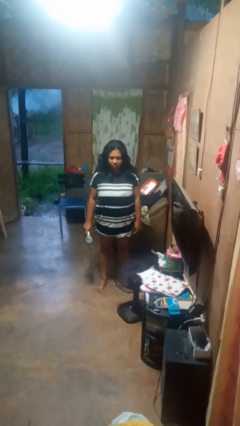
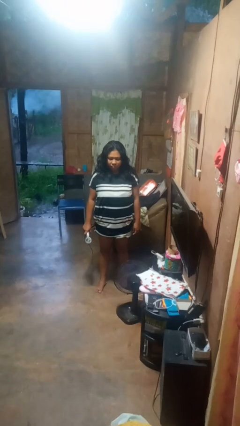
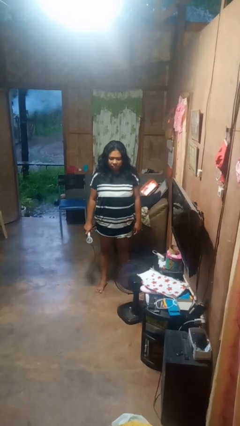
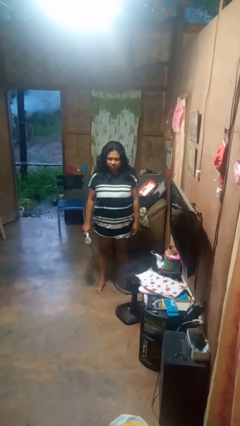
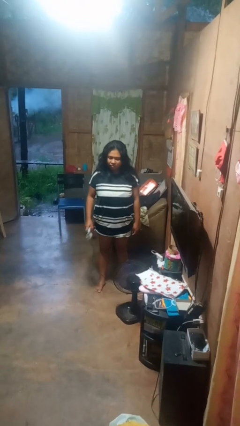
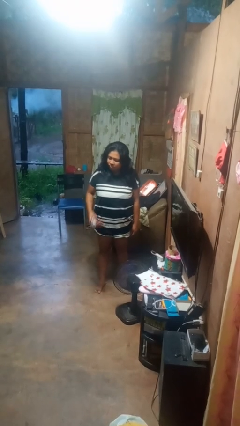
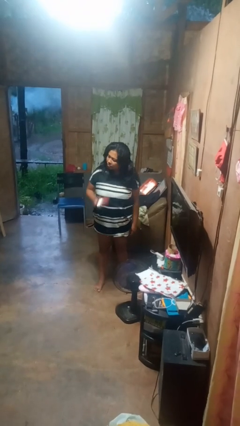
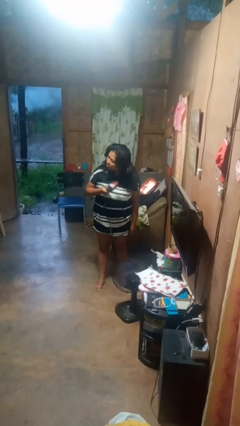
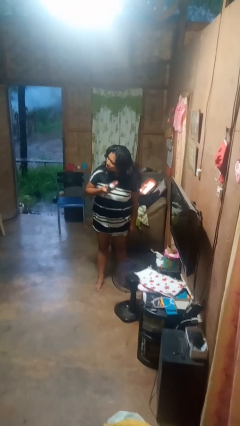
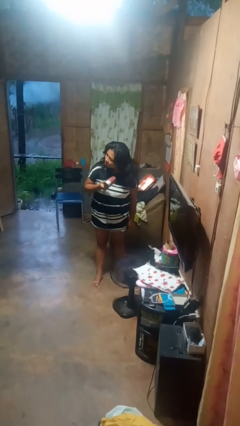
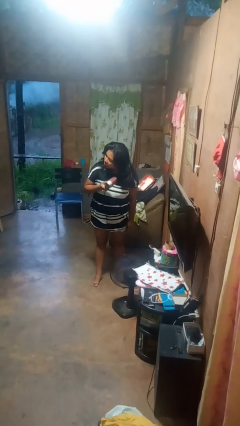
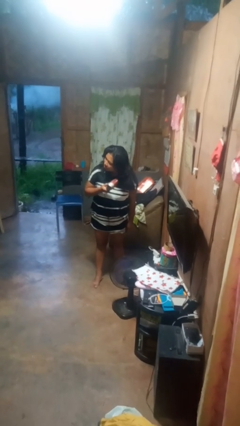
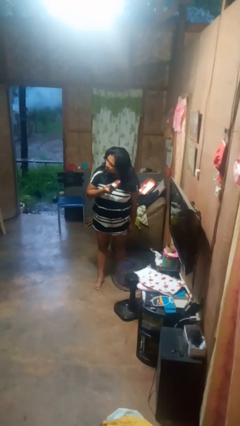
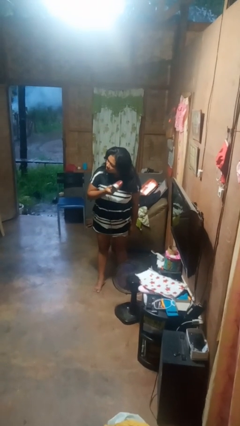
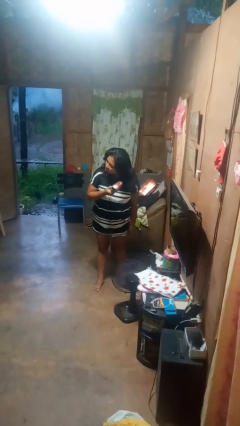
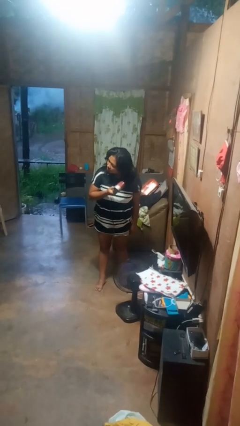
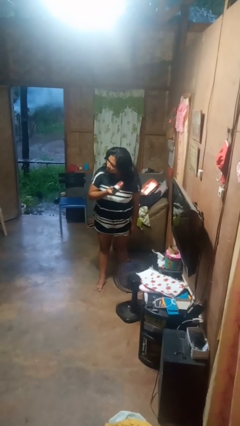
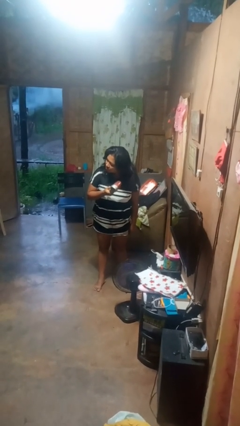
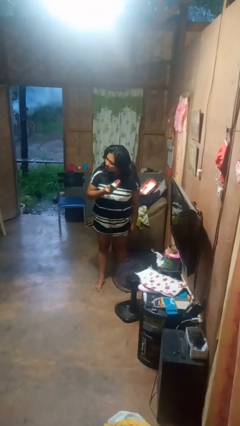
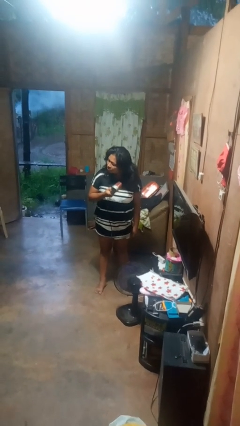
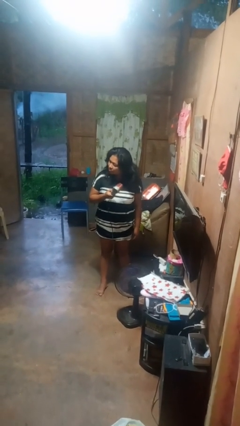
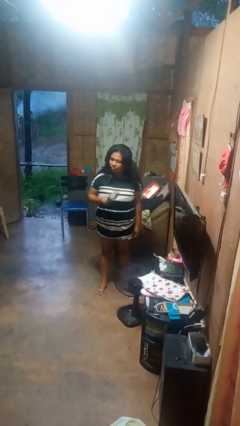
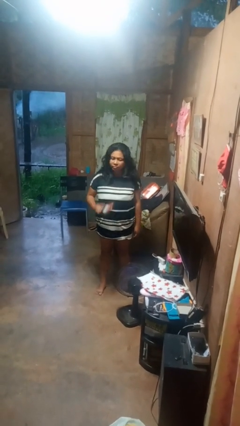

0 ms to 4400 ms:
person dries hair with hairdryer

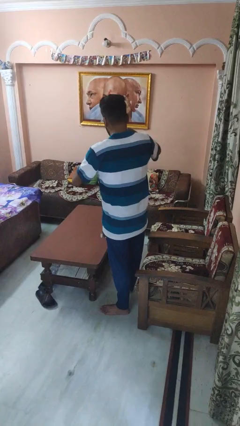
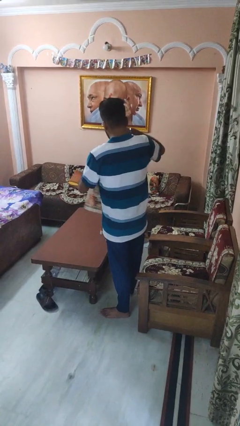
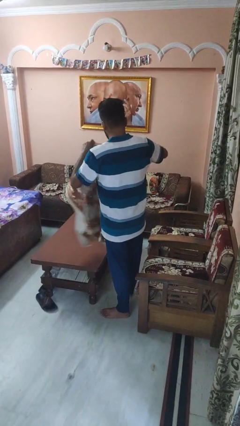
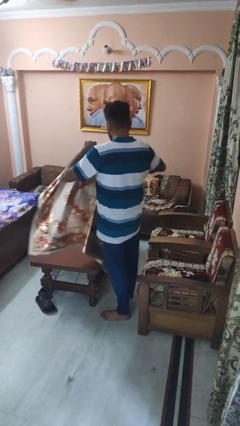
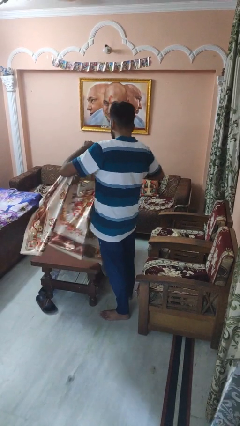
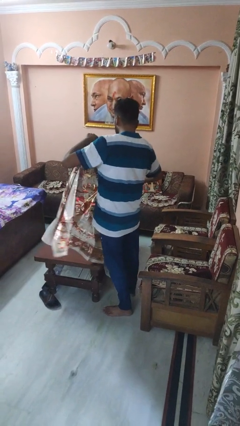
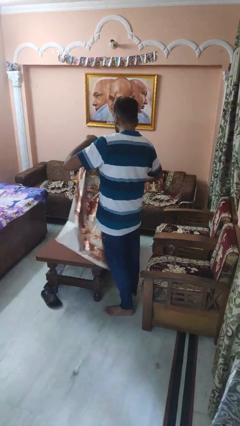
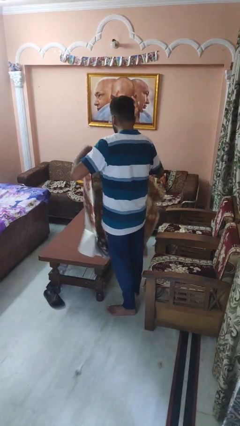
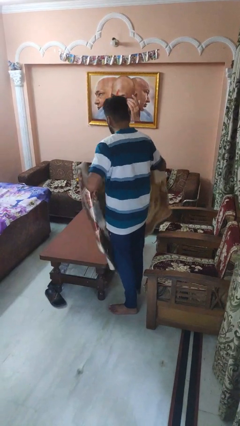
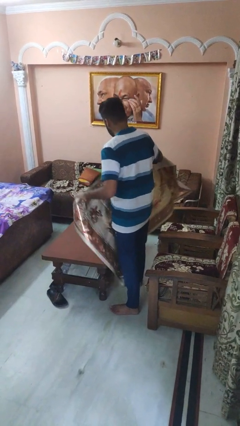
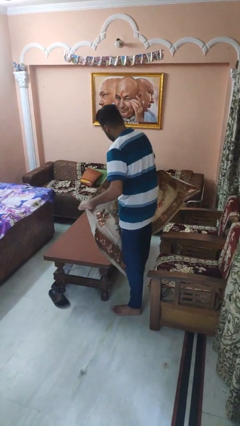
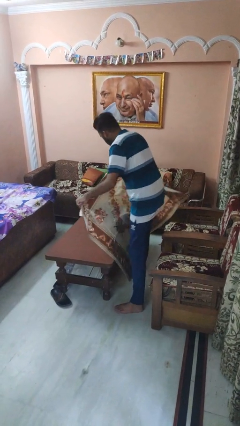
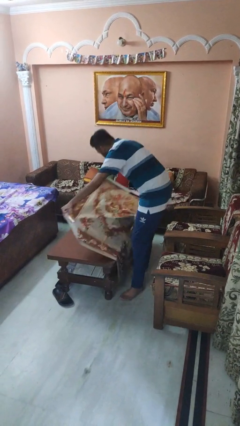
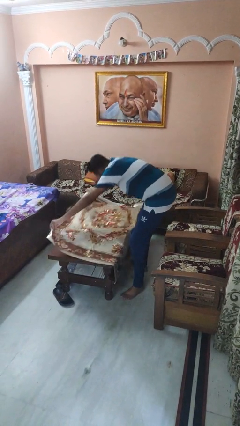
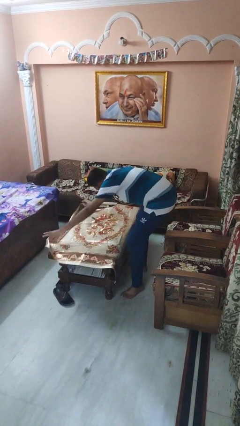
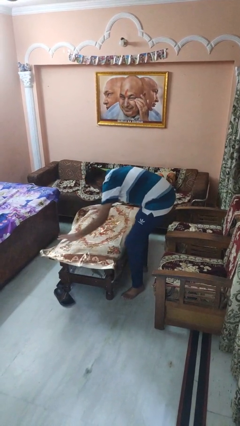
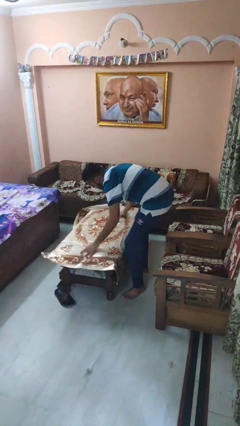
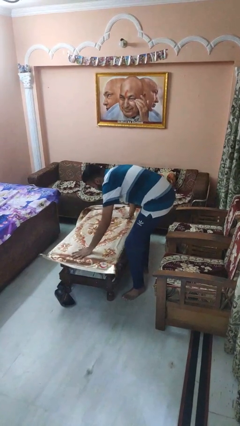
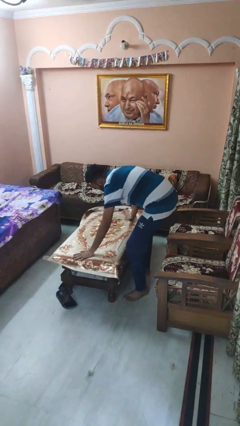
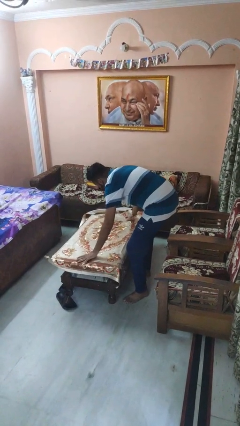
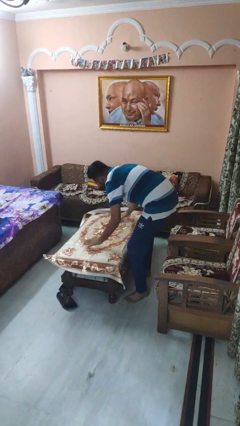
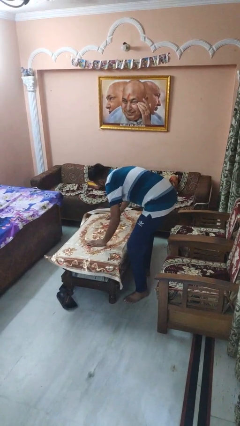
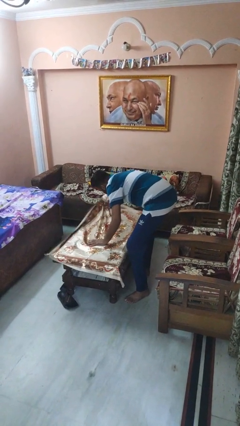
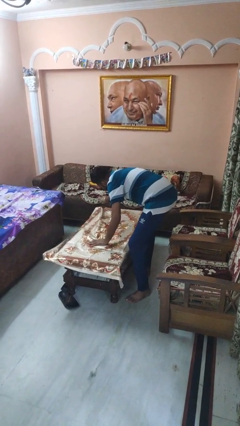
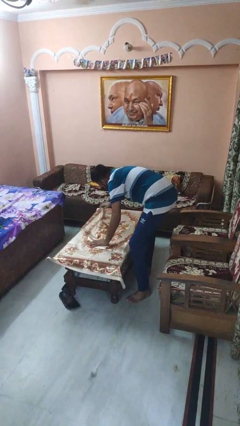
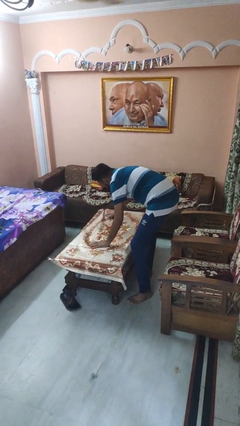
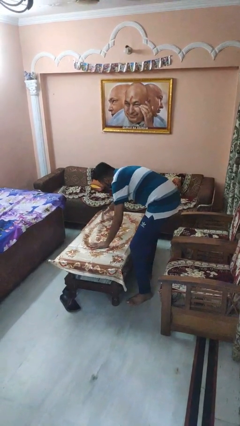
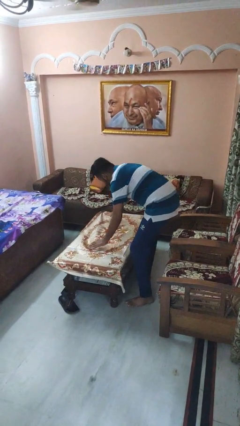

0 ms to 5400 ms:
person spreads tablecloth

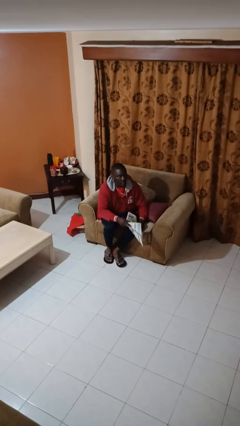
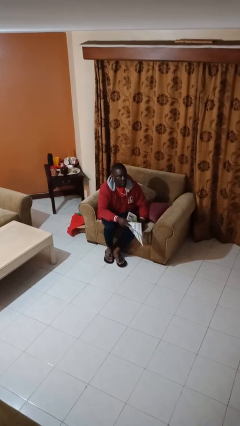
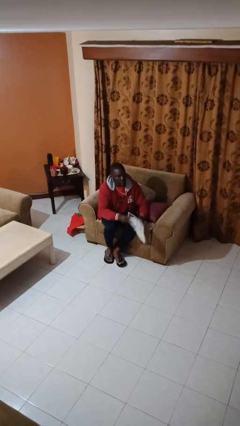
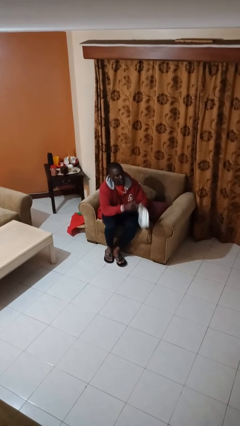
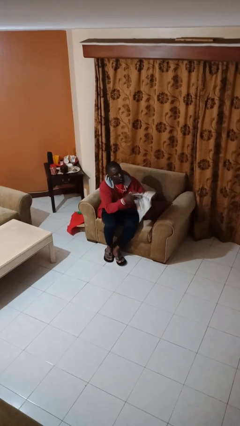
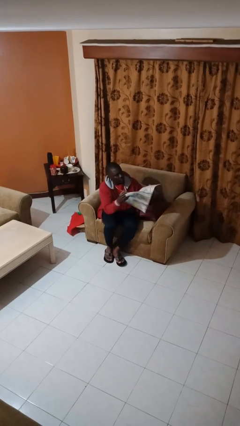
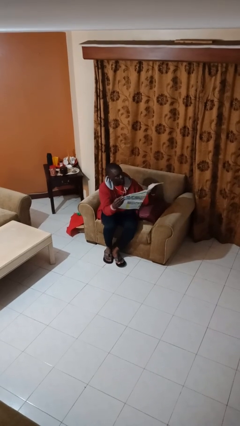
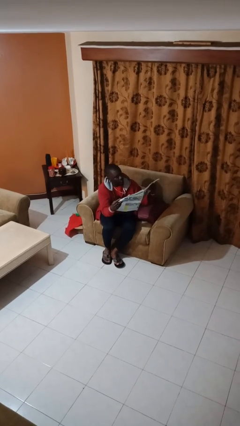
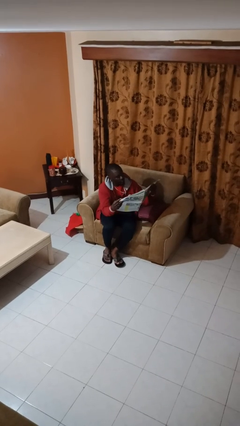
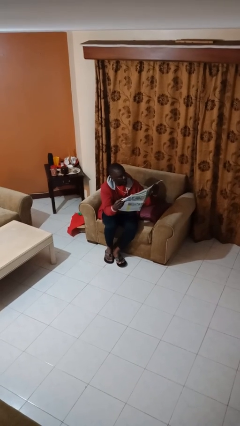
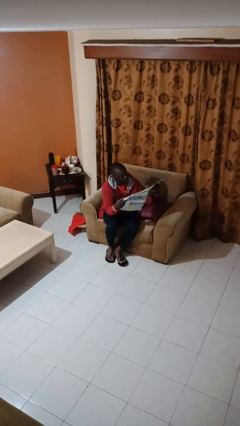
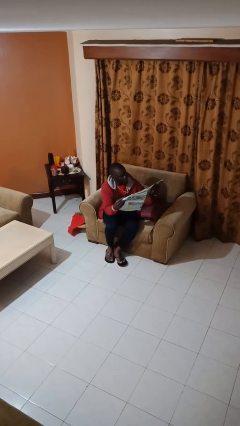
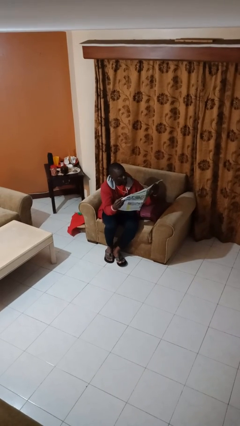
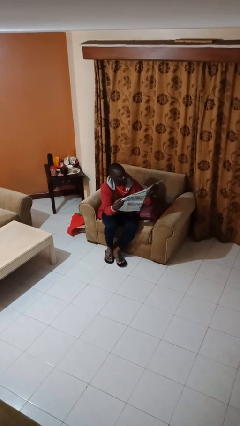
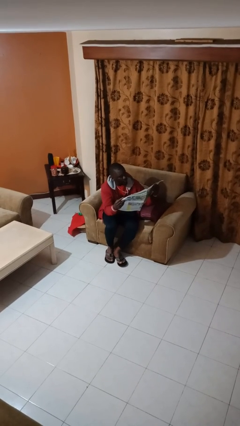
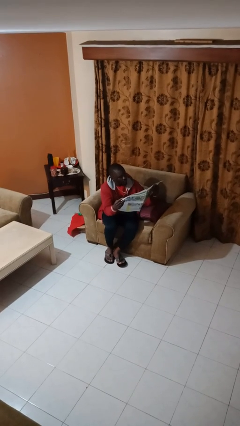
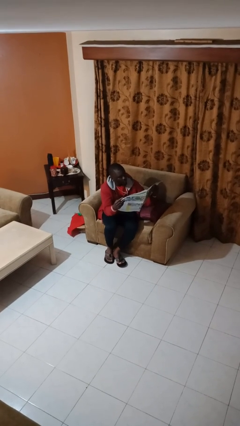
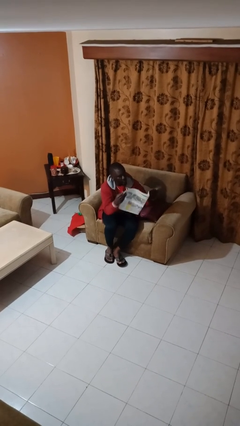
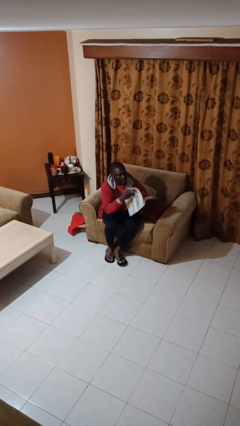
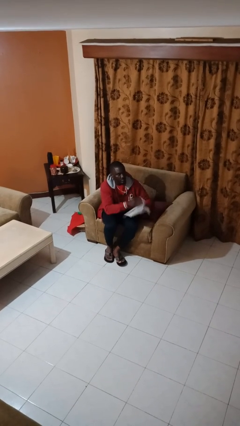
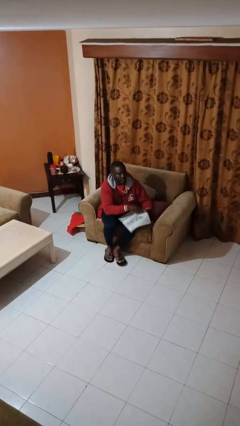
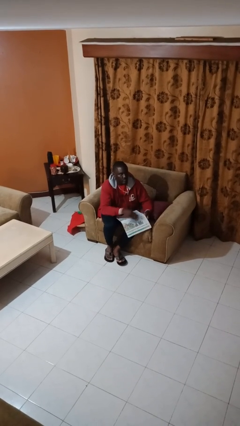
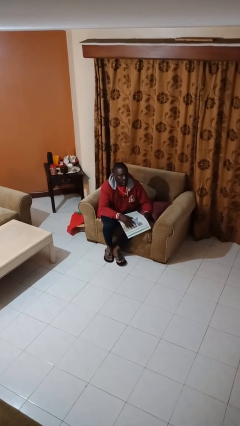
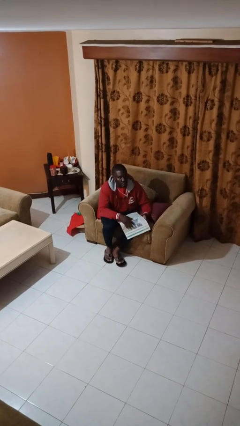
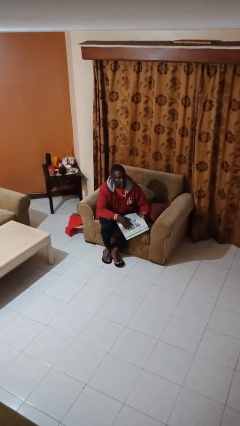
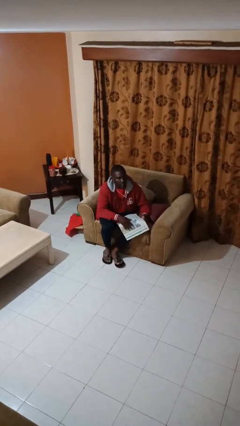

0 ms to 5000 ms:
person reads newspaper

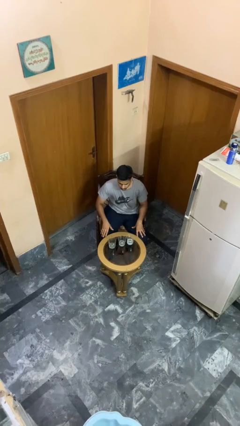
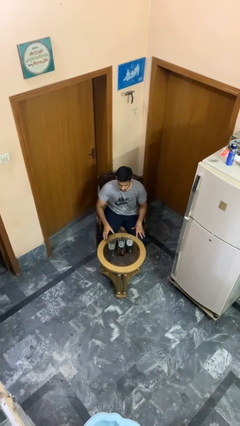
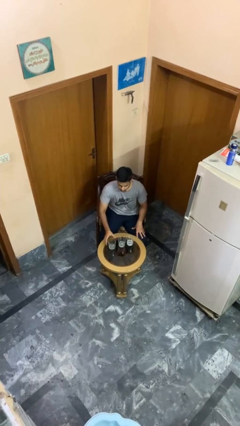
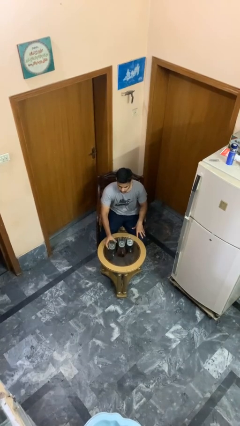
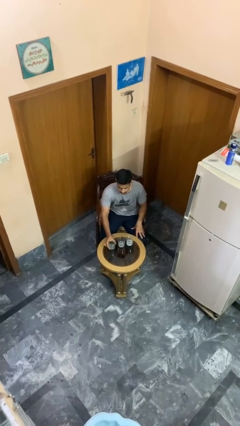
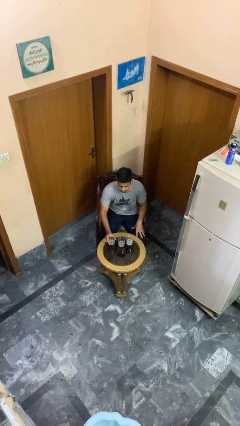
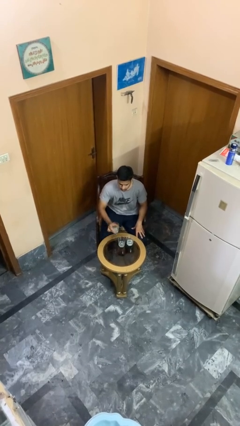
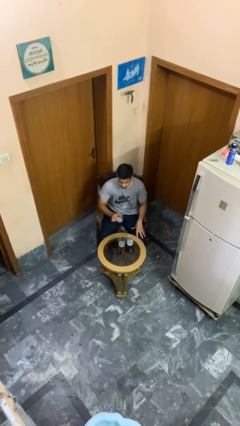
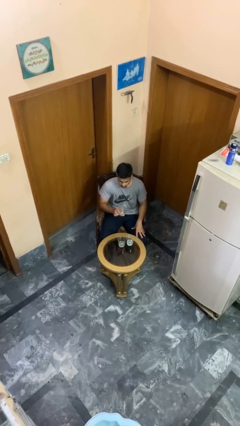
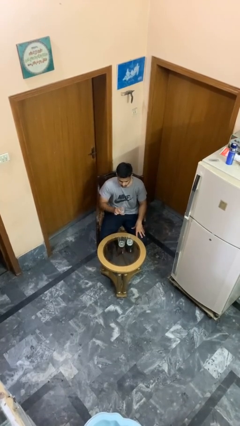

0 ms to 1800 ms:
person picks up object from table

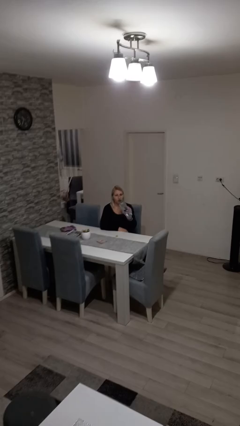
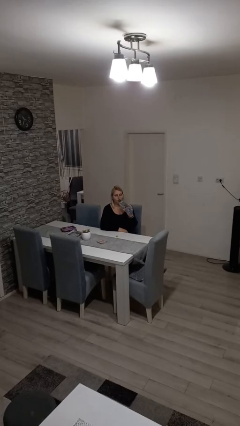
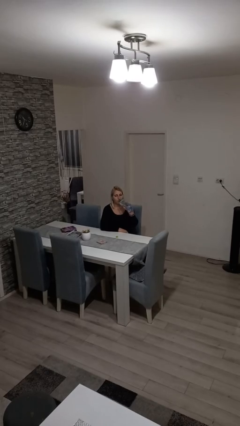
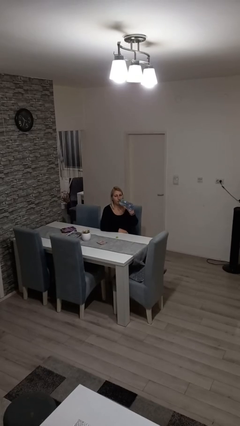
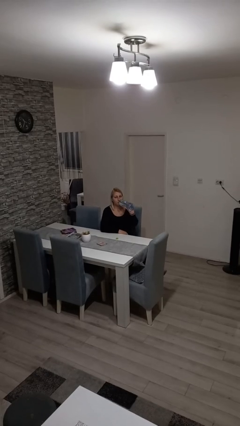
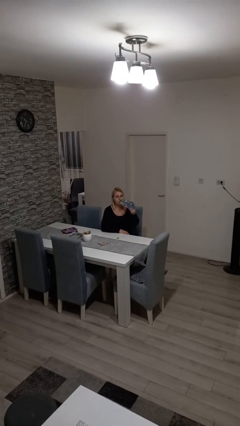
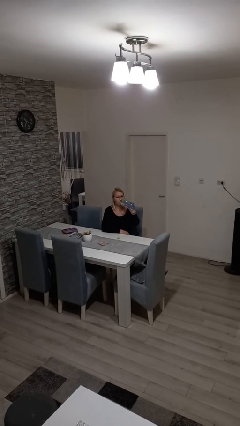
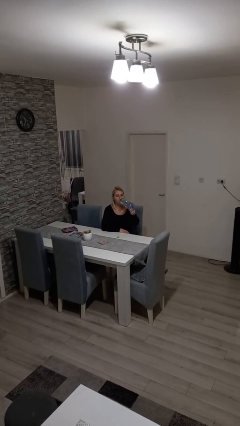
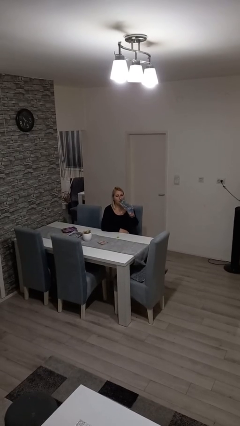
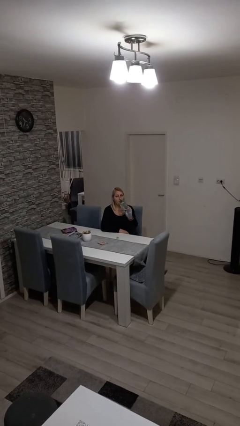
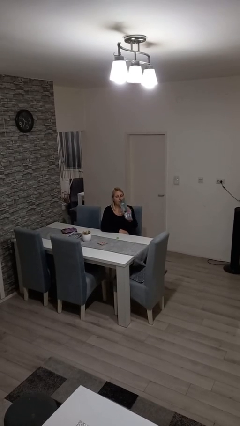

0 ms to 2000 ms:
person drinks from bottle
